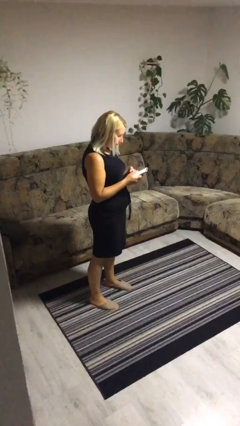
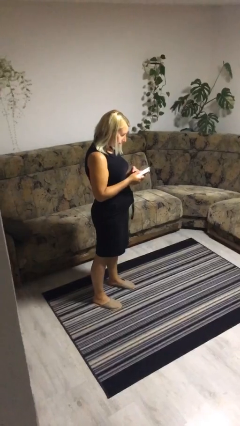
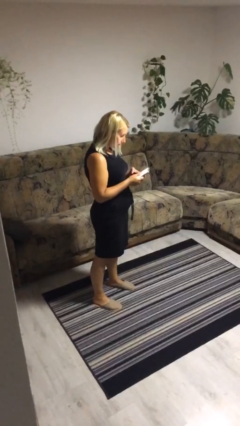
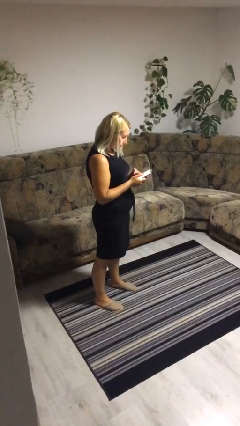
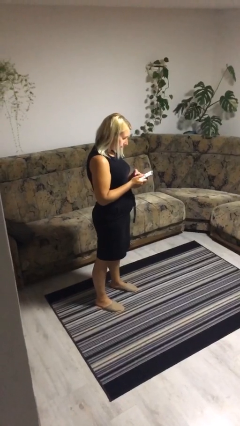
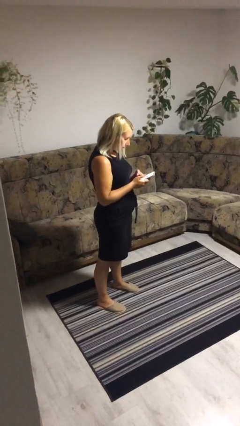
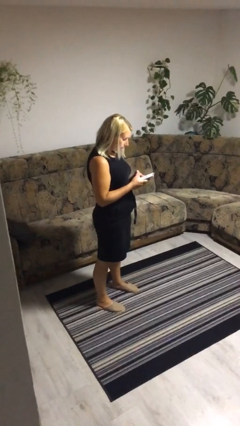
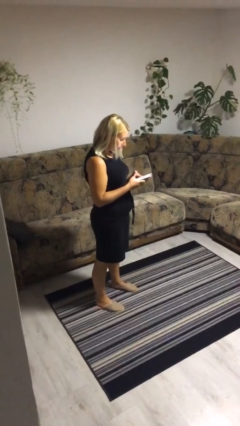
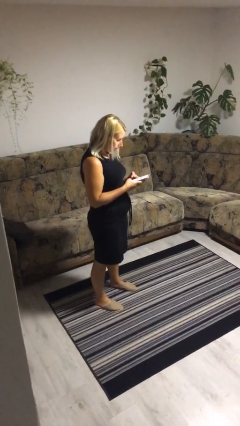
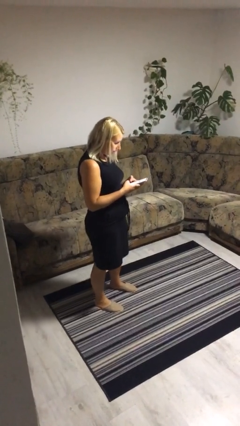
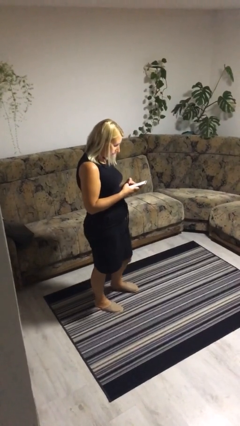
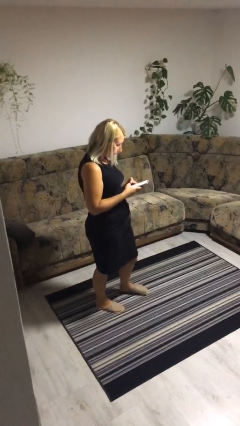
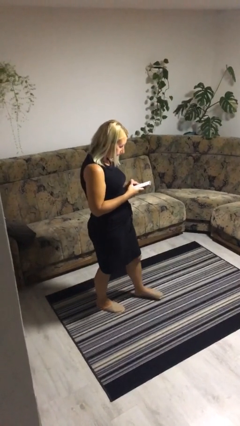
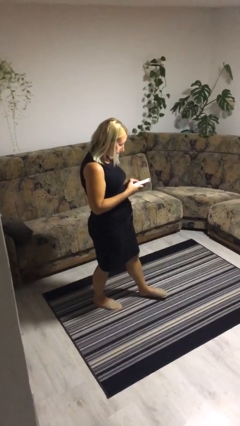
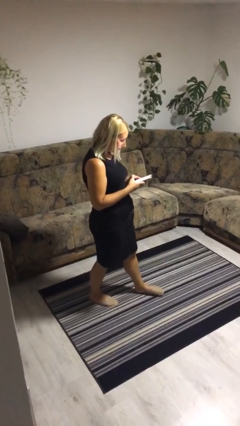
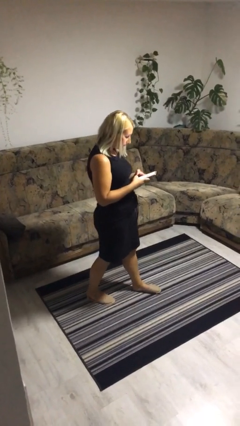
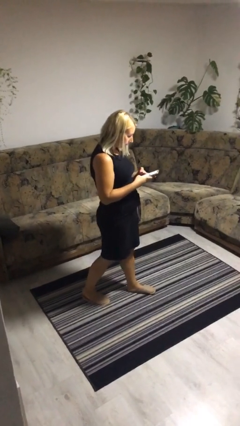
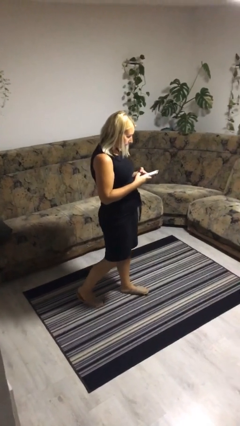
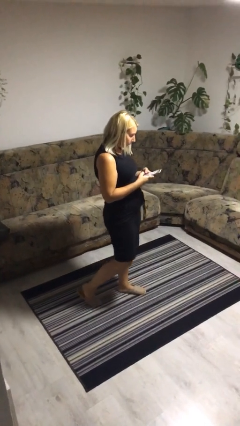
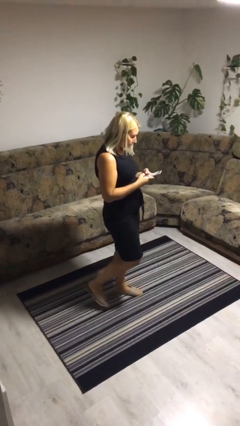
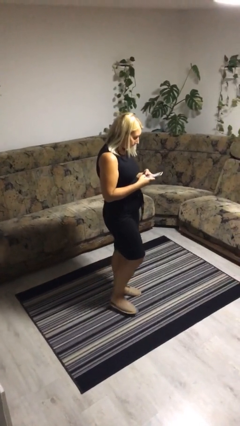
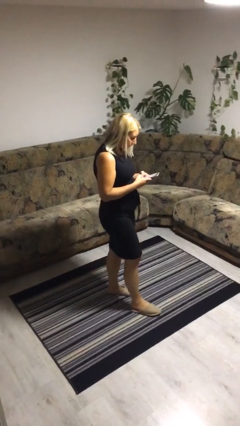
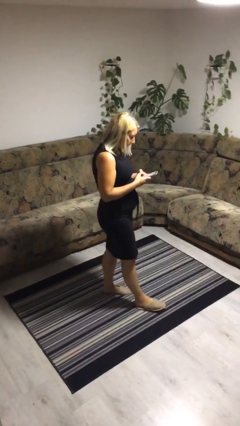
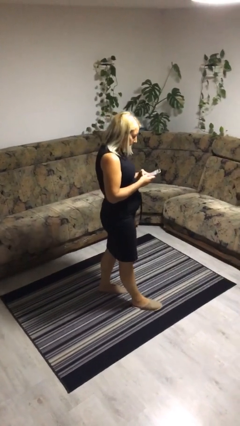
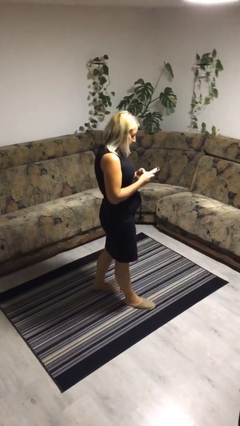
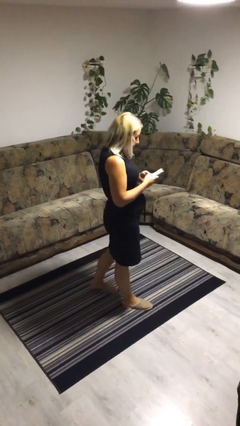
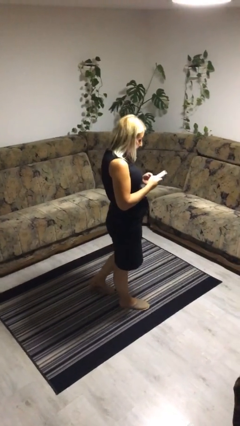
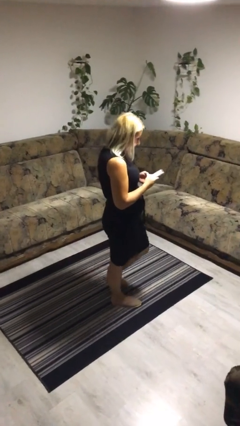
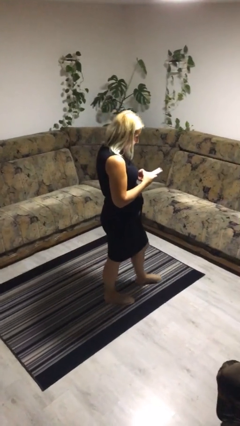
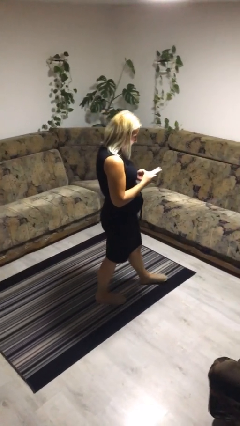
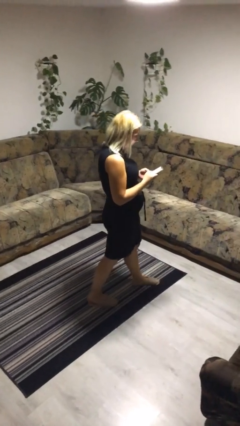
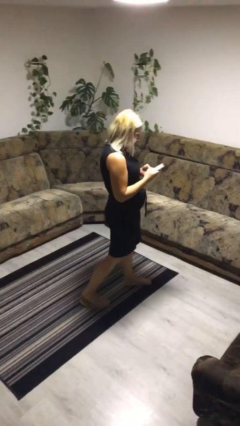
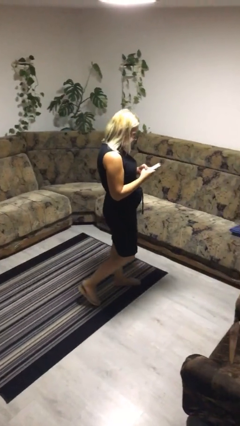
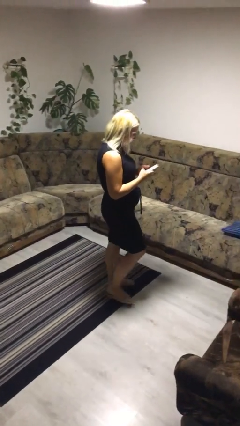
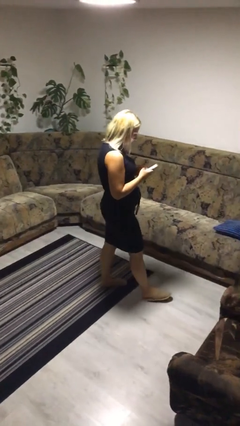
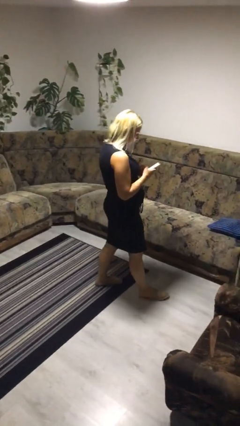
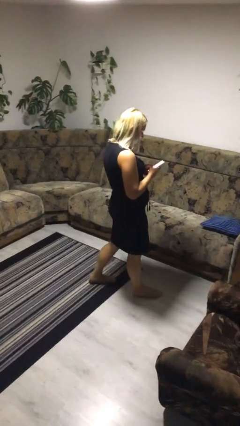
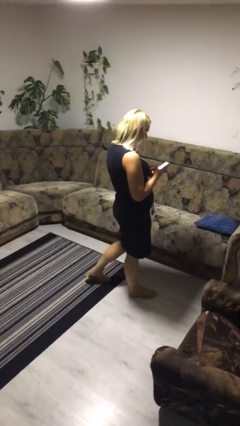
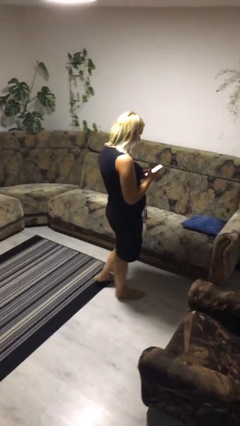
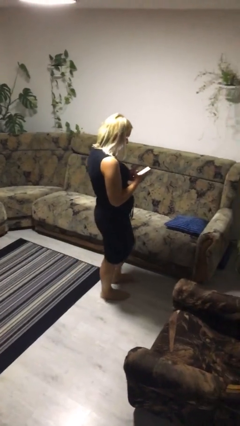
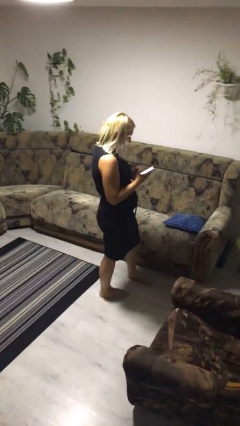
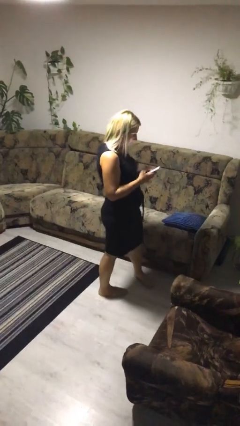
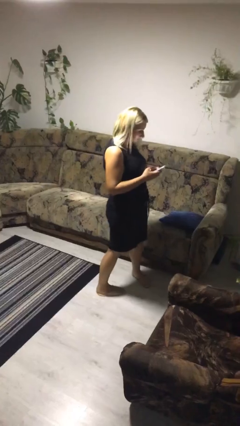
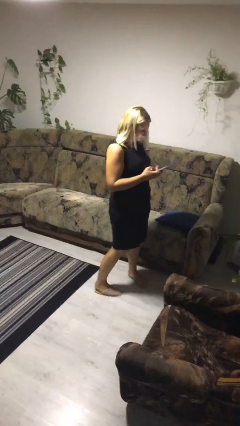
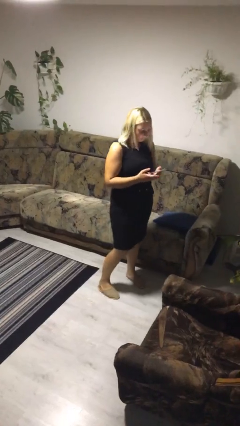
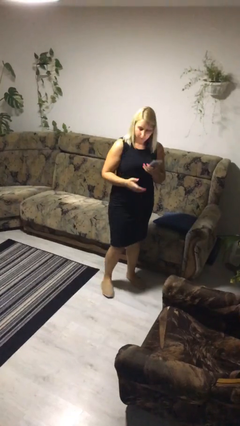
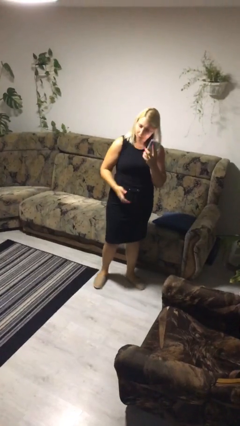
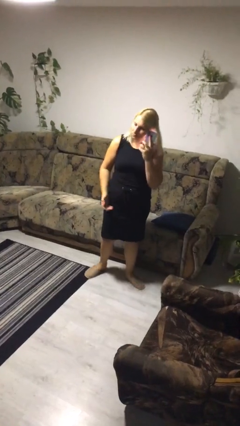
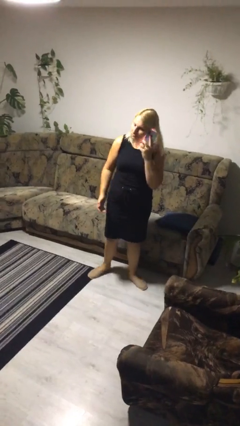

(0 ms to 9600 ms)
person texts on phone

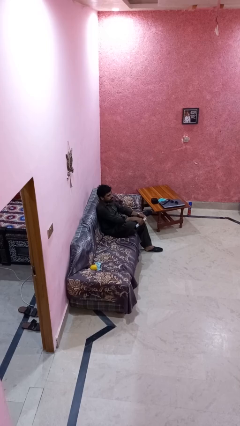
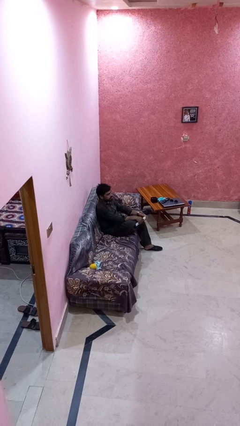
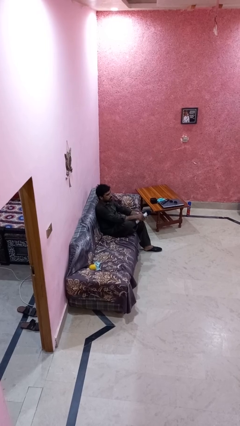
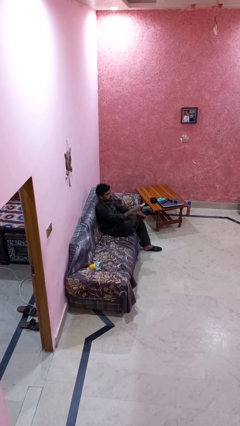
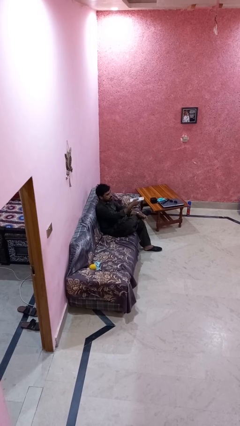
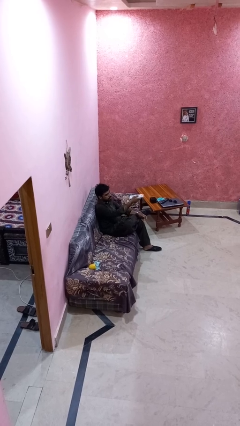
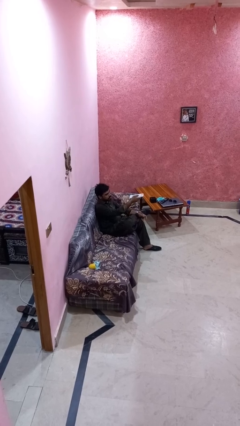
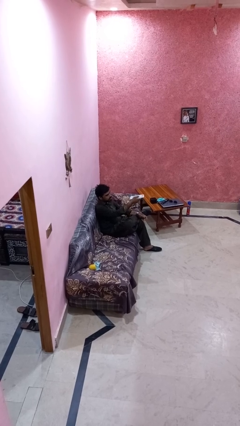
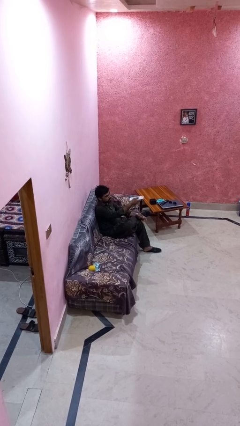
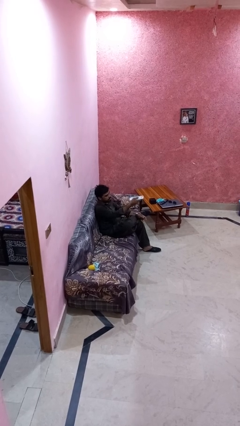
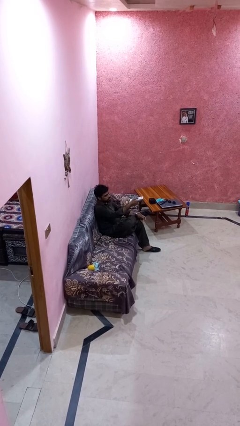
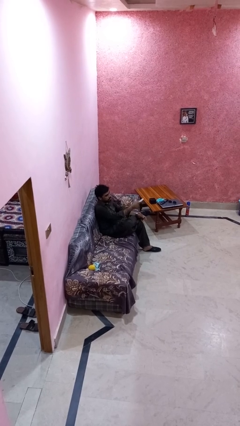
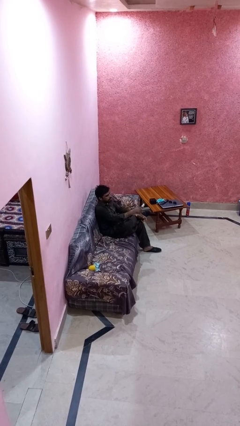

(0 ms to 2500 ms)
person uses television remote

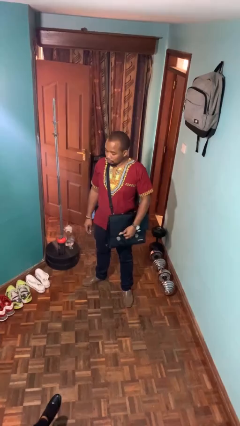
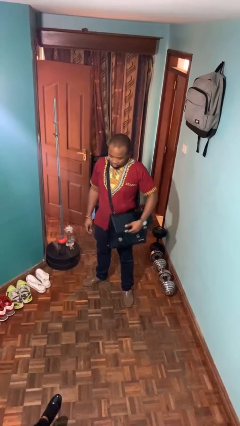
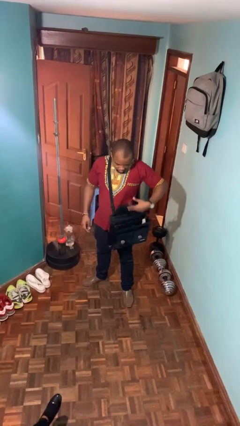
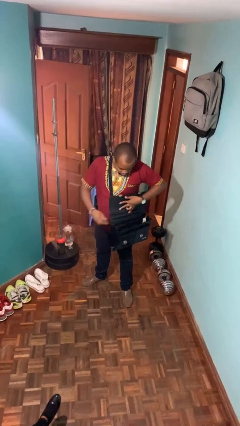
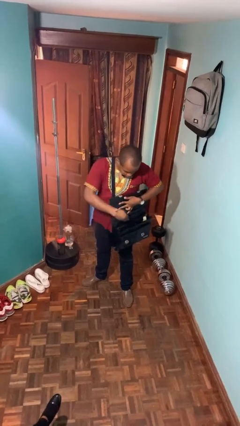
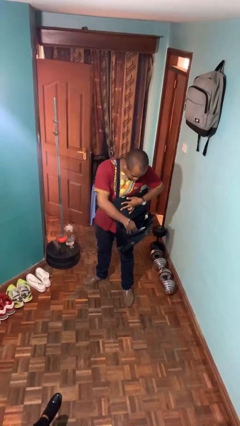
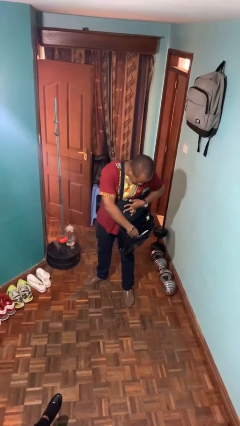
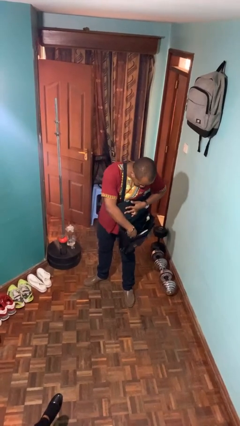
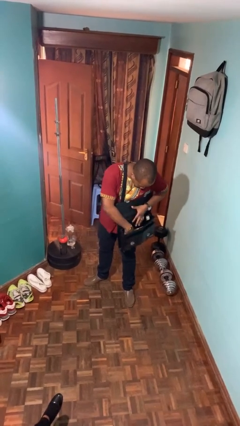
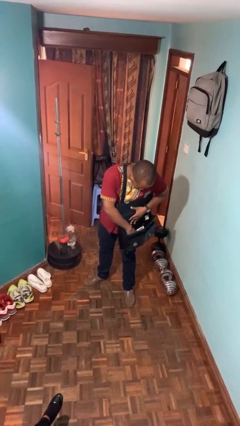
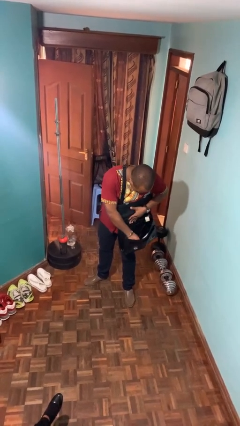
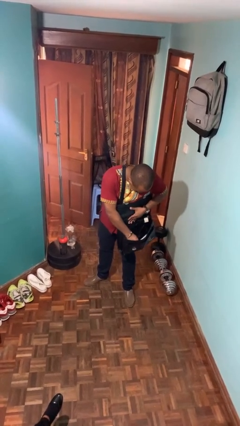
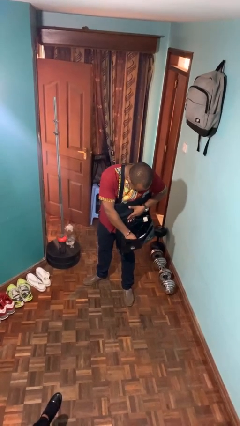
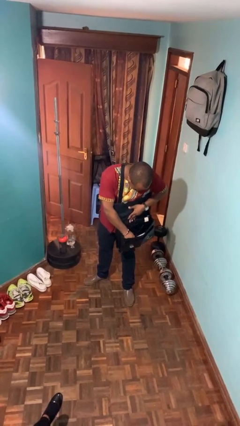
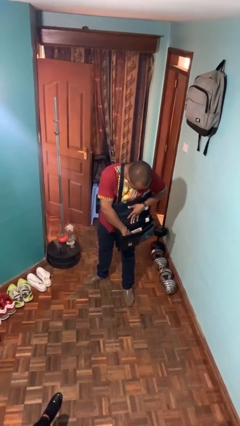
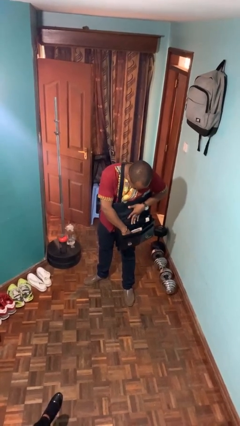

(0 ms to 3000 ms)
person searches in purse

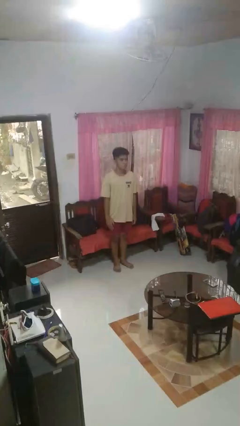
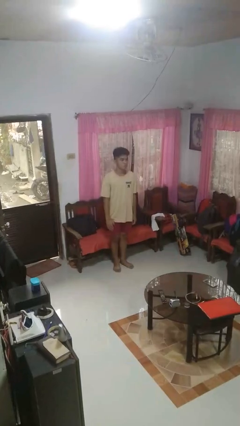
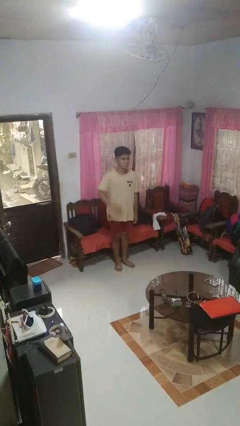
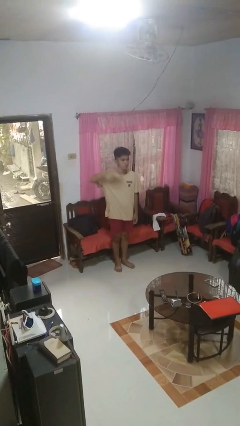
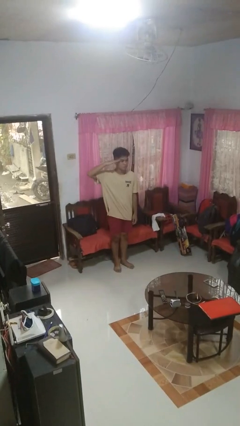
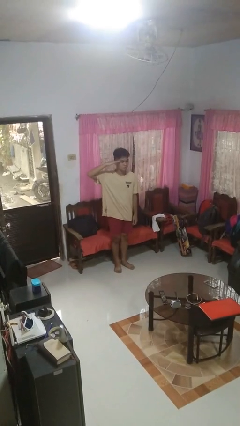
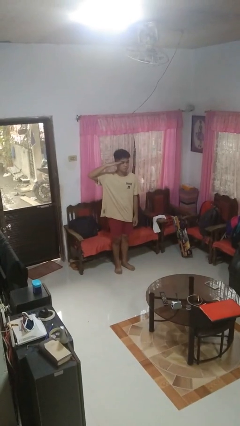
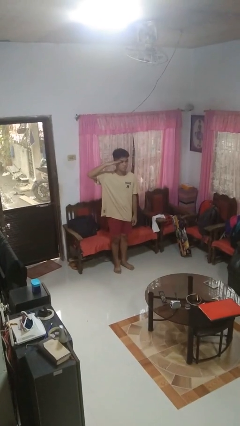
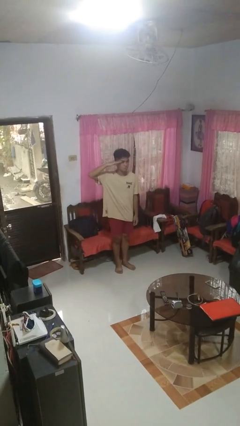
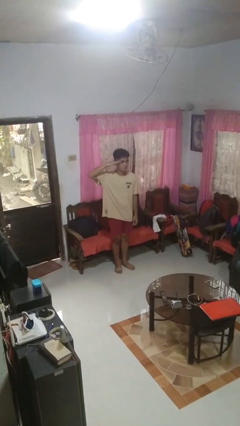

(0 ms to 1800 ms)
person salutes

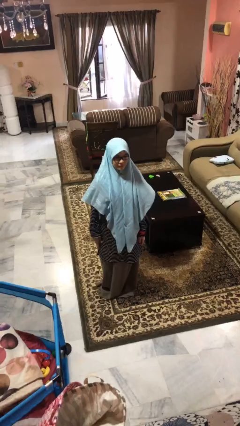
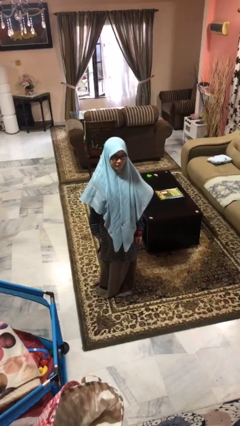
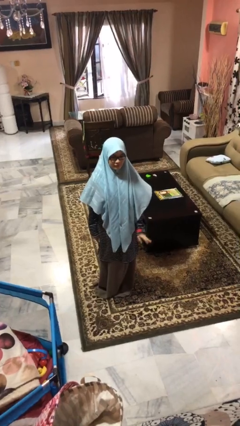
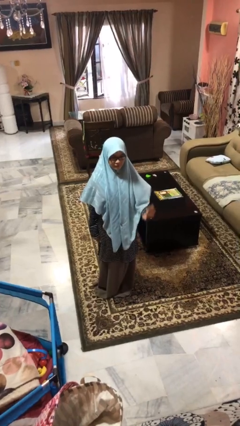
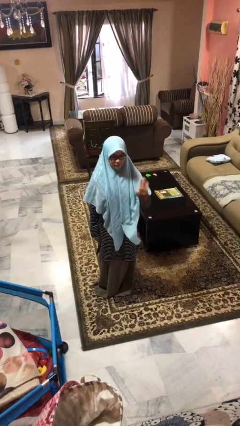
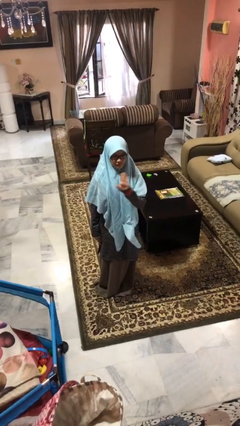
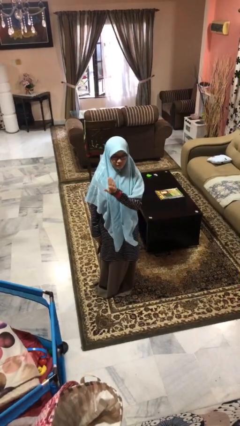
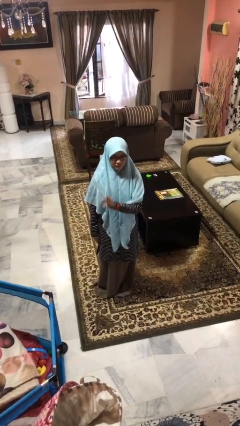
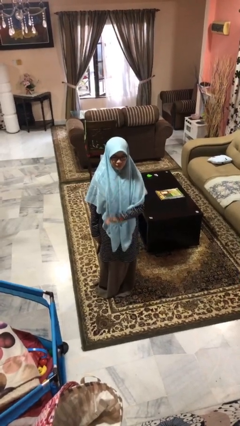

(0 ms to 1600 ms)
person gestures swipe right
